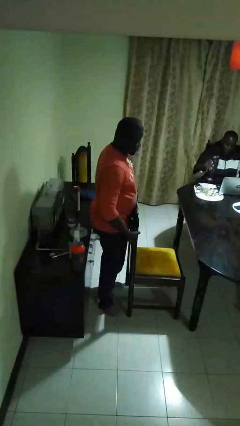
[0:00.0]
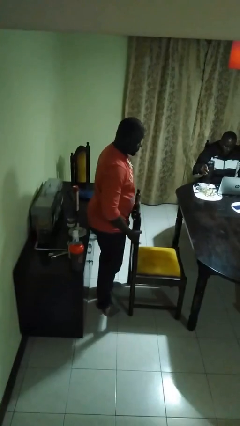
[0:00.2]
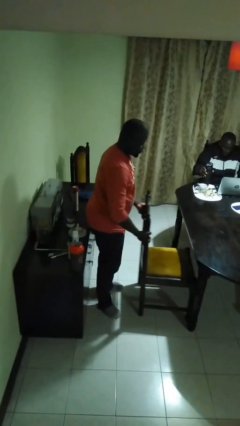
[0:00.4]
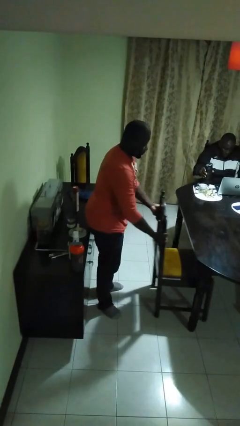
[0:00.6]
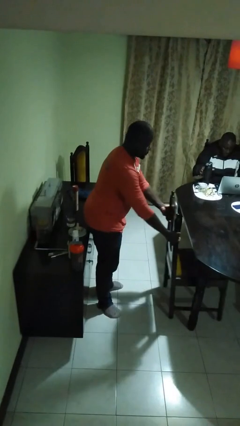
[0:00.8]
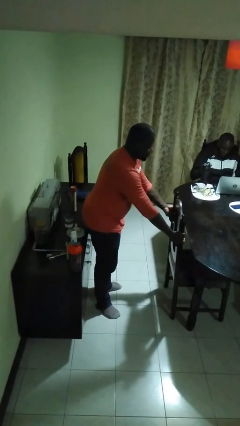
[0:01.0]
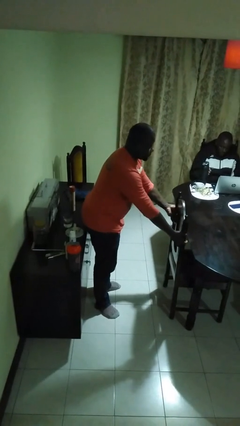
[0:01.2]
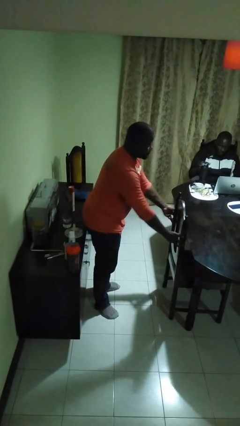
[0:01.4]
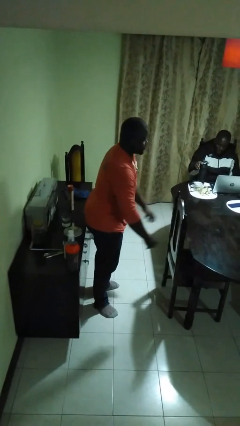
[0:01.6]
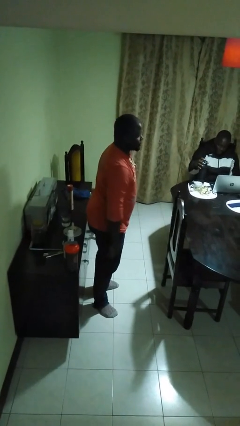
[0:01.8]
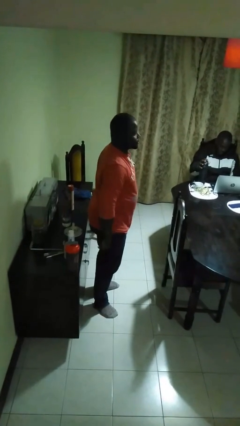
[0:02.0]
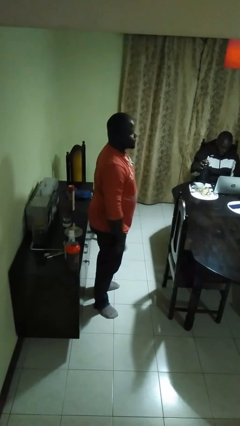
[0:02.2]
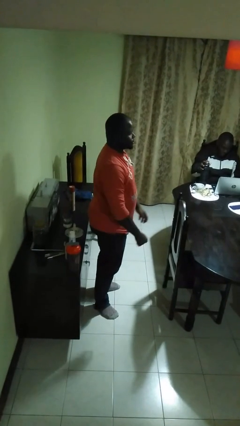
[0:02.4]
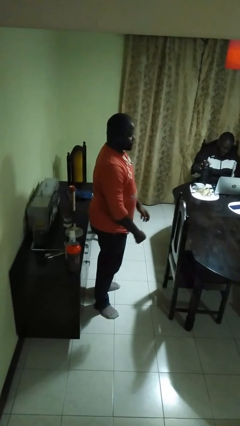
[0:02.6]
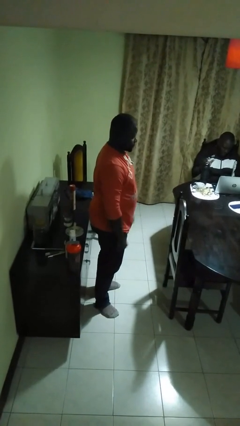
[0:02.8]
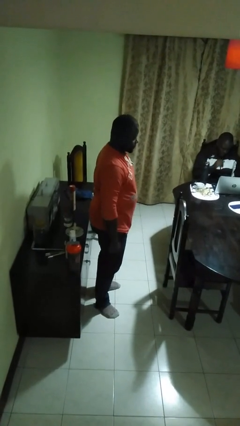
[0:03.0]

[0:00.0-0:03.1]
person pushes in chair

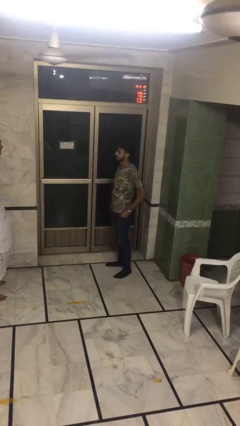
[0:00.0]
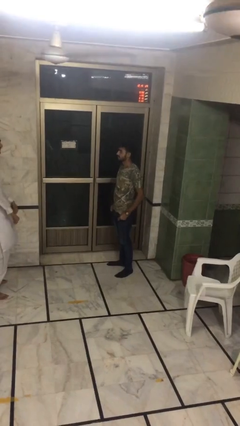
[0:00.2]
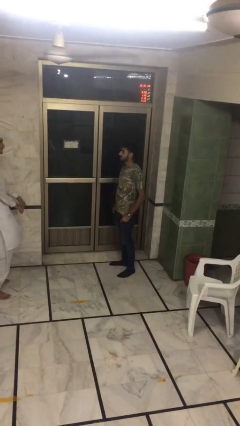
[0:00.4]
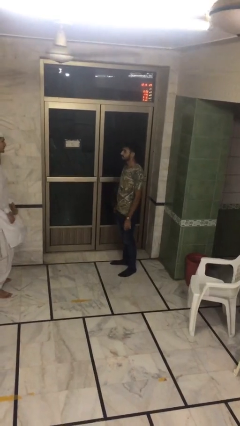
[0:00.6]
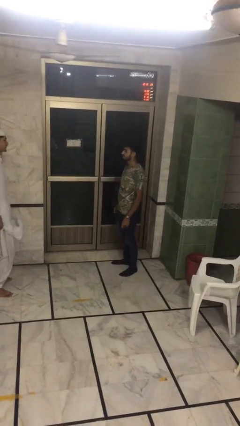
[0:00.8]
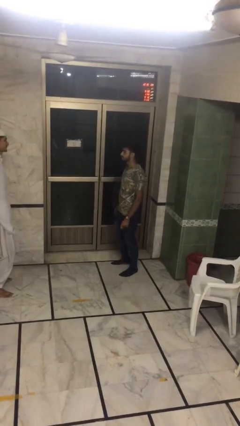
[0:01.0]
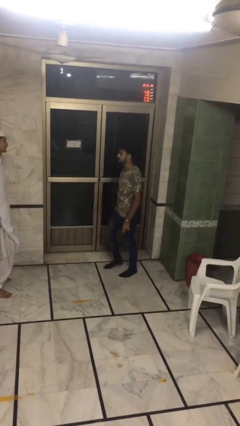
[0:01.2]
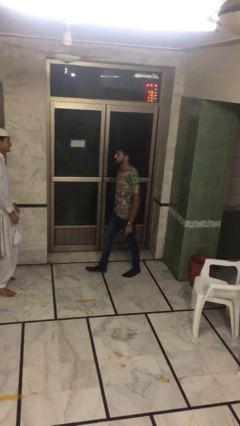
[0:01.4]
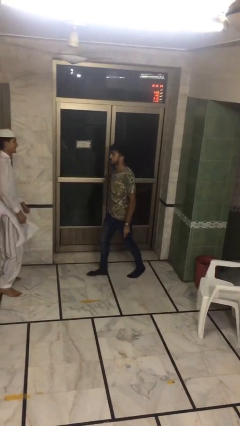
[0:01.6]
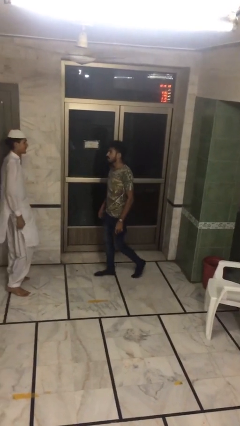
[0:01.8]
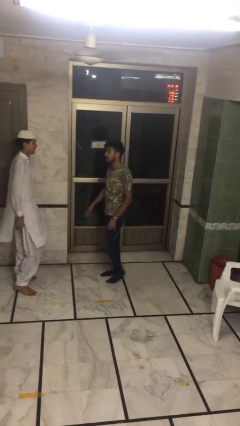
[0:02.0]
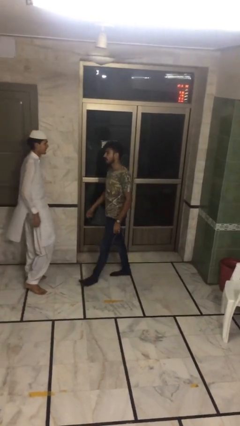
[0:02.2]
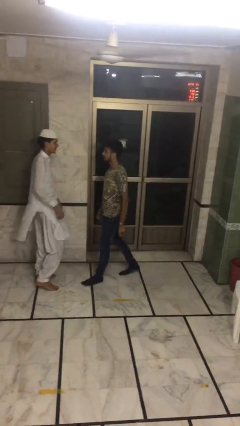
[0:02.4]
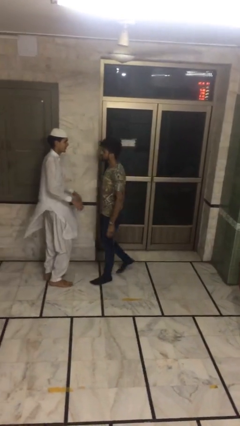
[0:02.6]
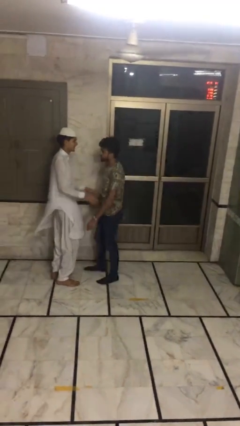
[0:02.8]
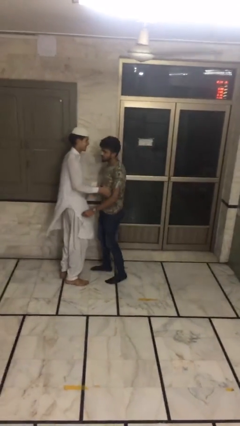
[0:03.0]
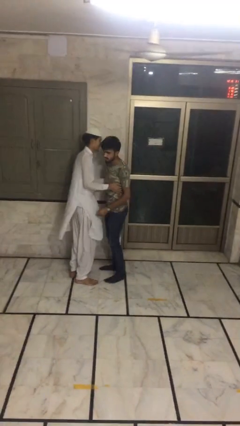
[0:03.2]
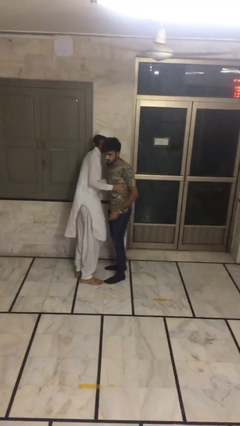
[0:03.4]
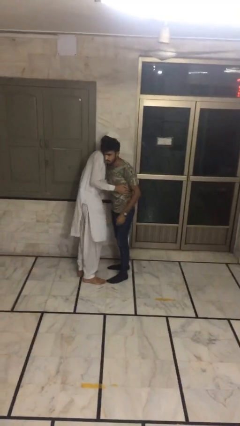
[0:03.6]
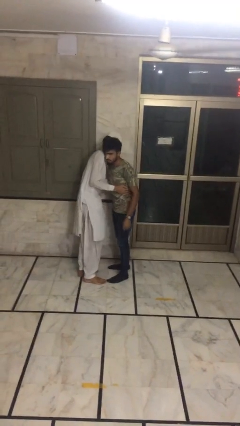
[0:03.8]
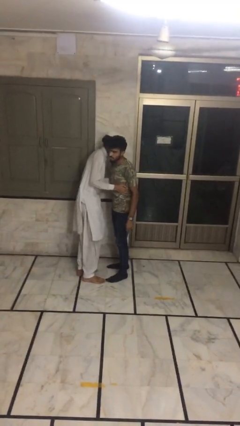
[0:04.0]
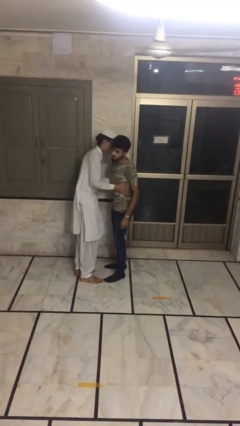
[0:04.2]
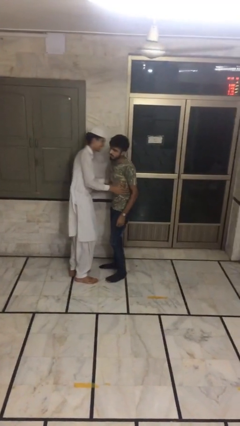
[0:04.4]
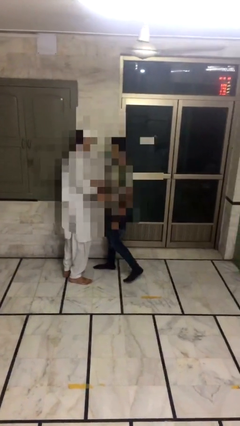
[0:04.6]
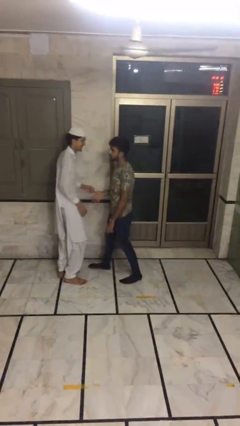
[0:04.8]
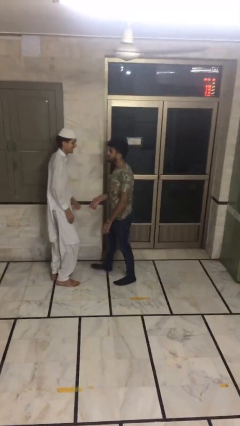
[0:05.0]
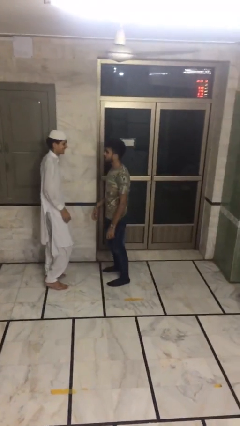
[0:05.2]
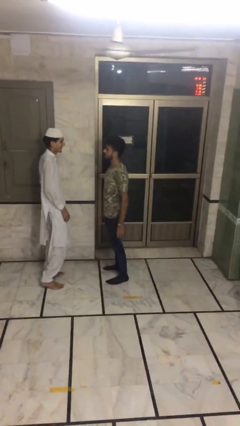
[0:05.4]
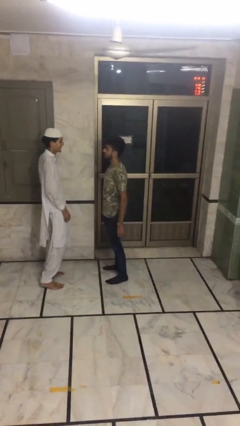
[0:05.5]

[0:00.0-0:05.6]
person embraces person

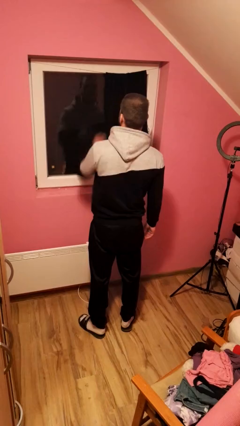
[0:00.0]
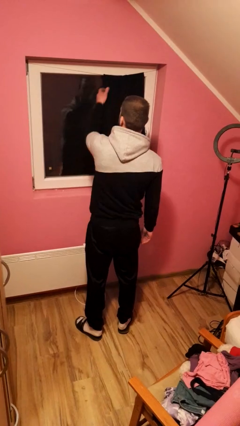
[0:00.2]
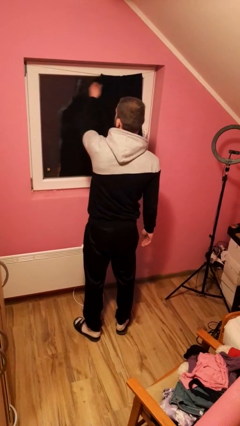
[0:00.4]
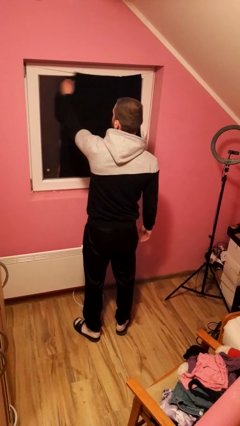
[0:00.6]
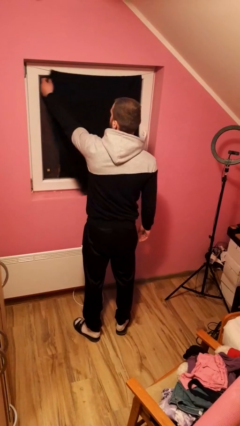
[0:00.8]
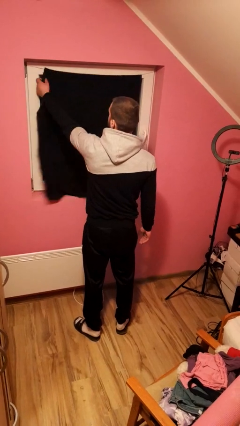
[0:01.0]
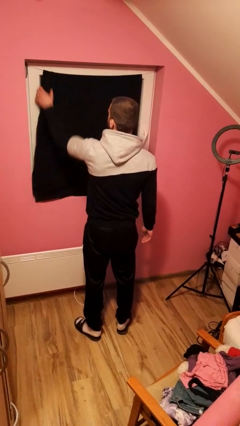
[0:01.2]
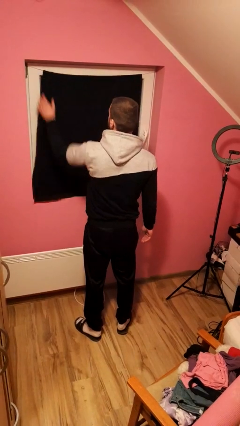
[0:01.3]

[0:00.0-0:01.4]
person closes curtains

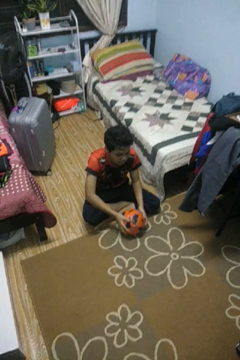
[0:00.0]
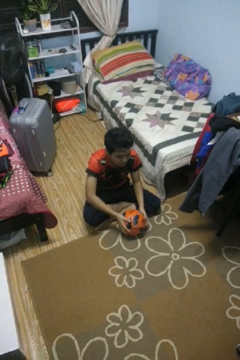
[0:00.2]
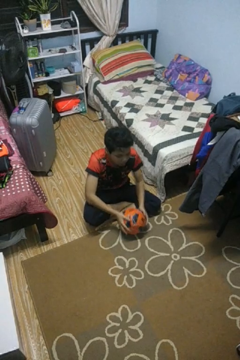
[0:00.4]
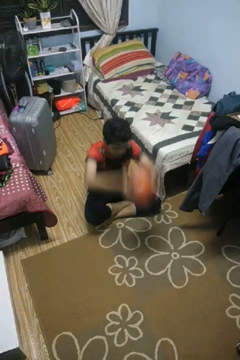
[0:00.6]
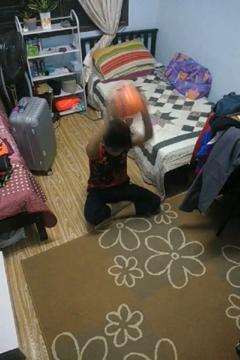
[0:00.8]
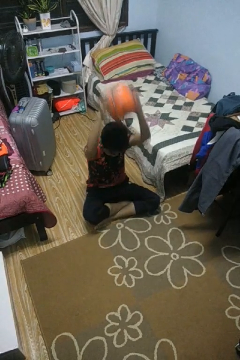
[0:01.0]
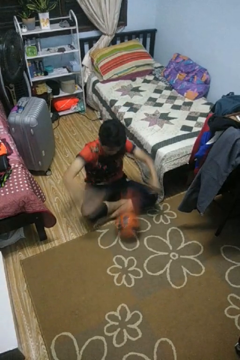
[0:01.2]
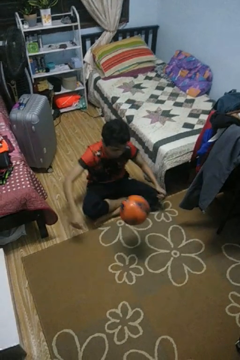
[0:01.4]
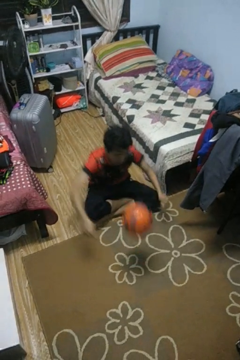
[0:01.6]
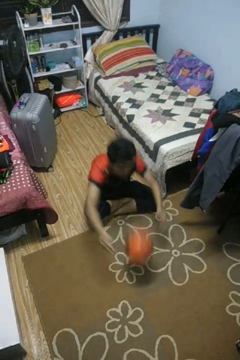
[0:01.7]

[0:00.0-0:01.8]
person bounces ball on floor

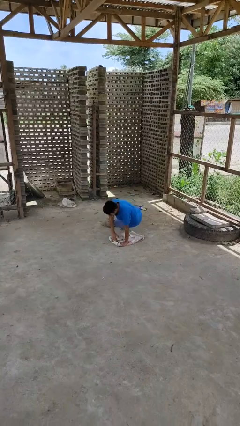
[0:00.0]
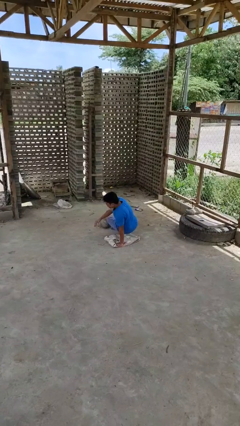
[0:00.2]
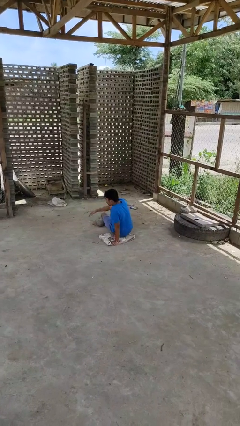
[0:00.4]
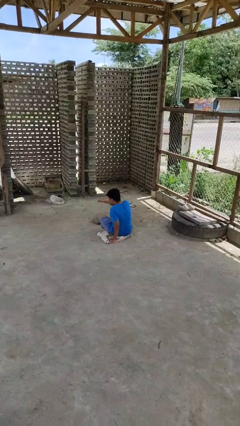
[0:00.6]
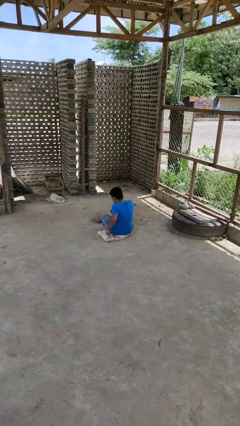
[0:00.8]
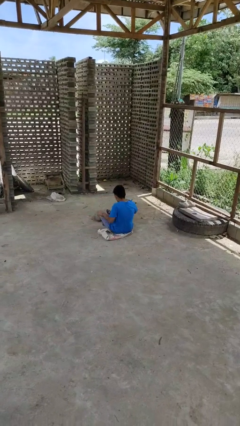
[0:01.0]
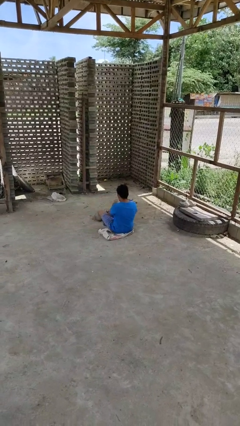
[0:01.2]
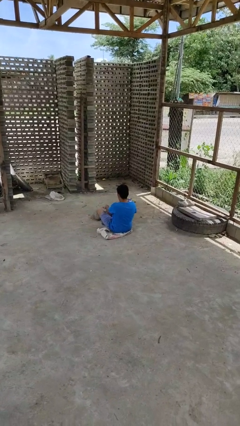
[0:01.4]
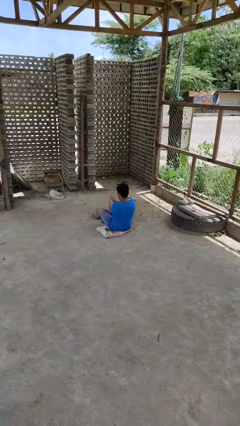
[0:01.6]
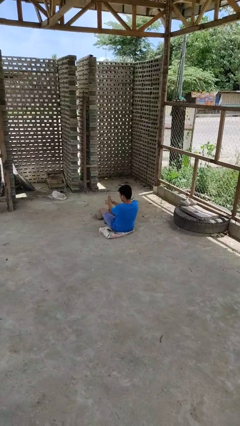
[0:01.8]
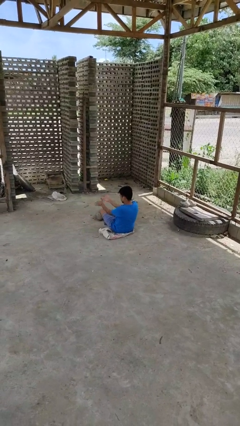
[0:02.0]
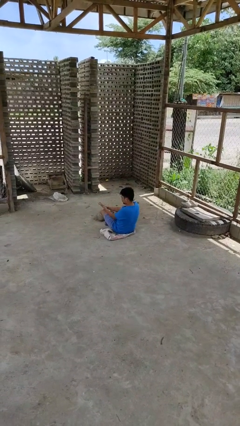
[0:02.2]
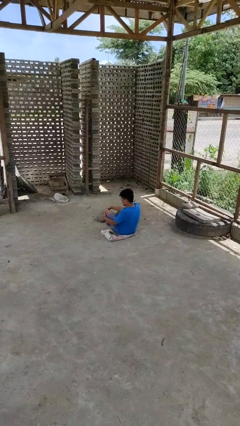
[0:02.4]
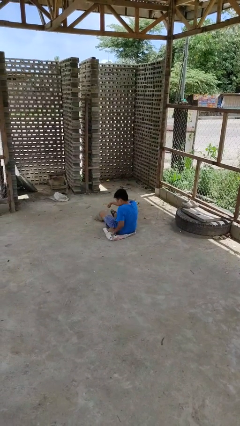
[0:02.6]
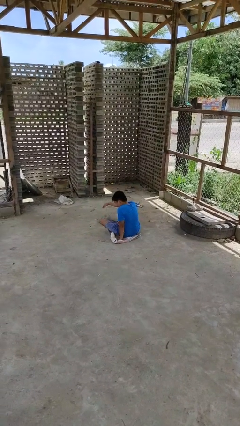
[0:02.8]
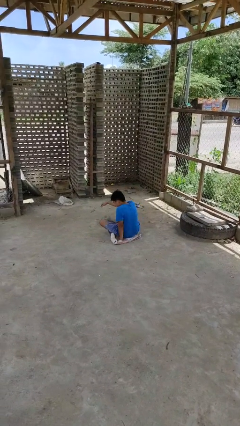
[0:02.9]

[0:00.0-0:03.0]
person lies down on floor

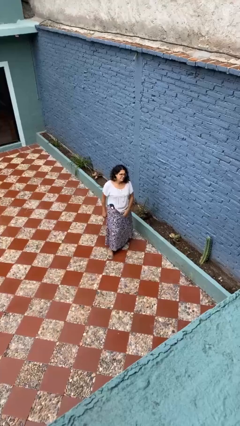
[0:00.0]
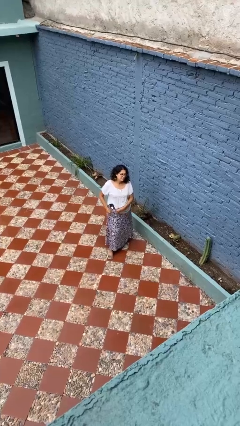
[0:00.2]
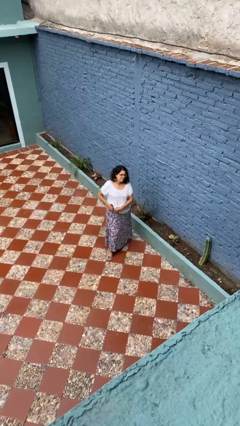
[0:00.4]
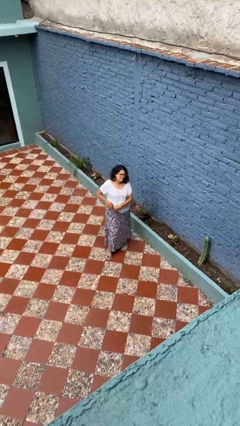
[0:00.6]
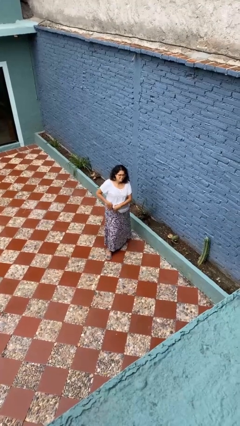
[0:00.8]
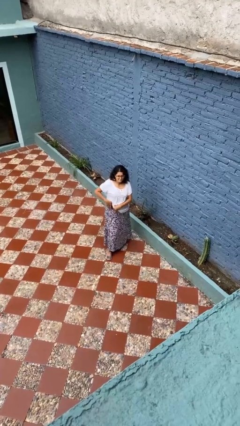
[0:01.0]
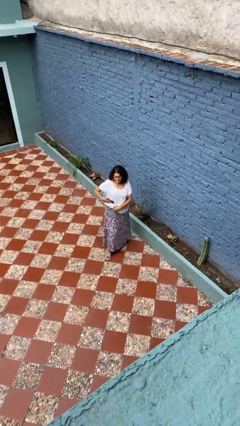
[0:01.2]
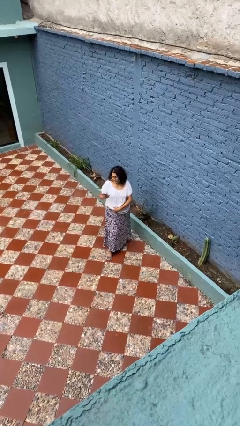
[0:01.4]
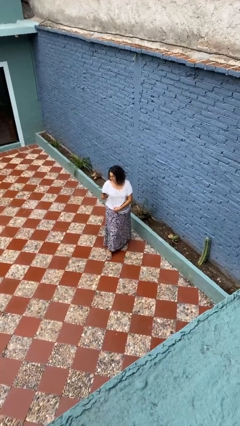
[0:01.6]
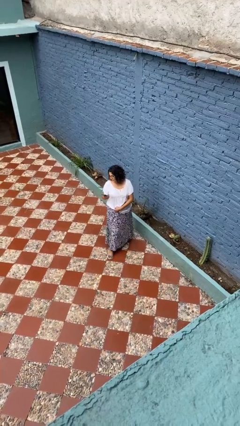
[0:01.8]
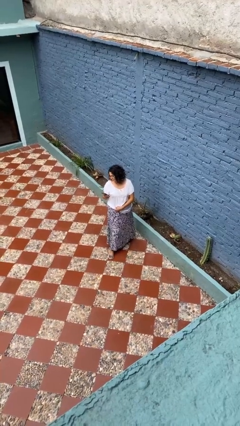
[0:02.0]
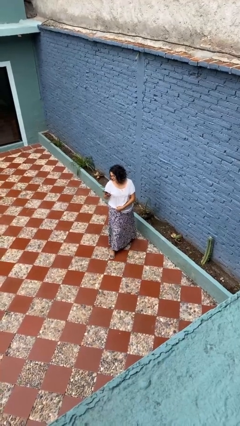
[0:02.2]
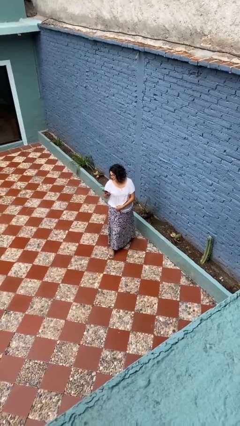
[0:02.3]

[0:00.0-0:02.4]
person takes phone from pocket

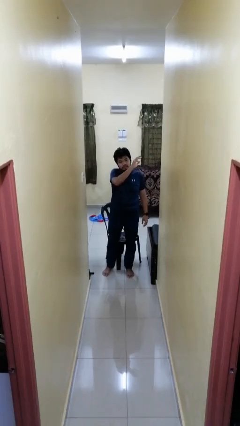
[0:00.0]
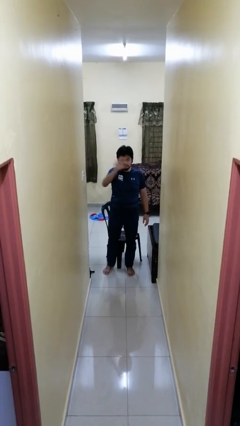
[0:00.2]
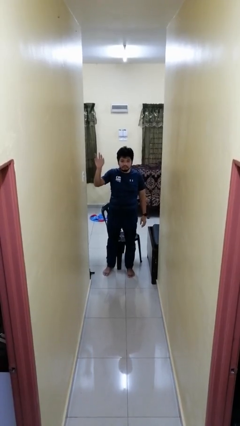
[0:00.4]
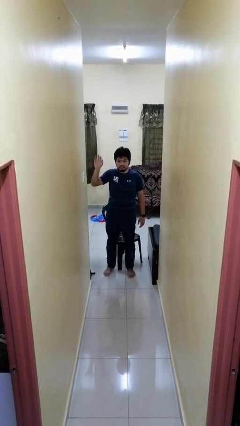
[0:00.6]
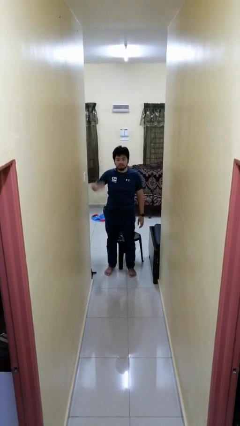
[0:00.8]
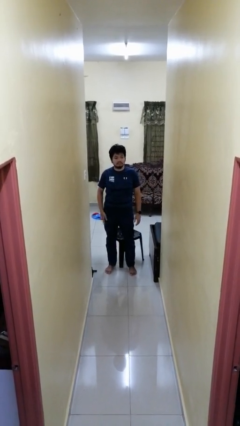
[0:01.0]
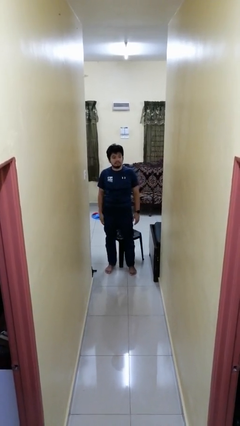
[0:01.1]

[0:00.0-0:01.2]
person gestures swipe right
